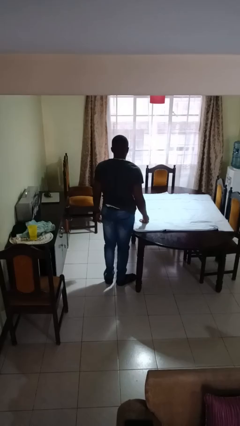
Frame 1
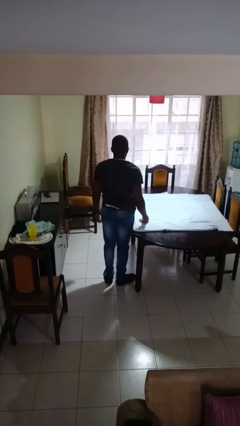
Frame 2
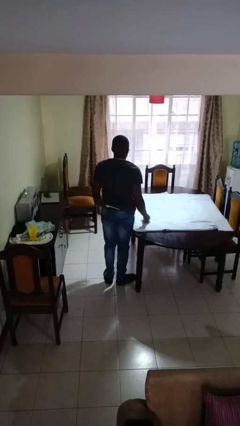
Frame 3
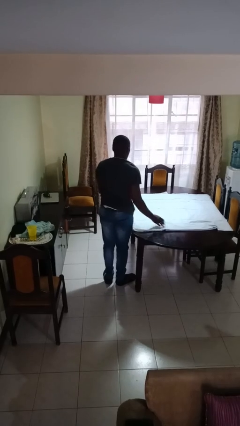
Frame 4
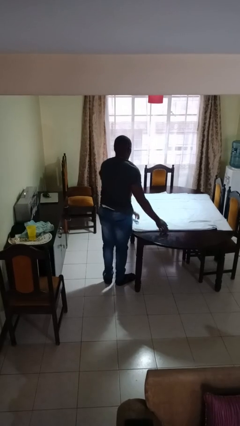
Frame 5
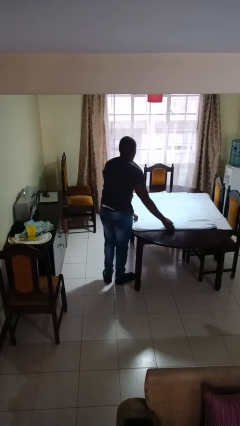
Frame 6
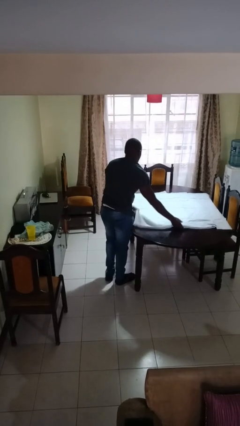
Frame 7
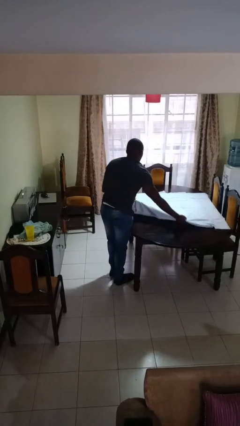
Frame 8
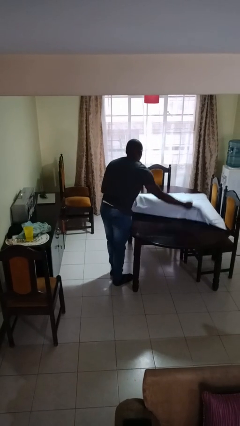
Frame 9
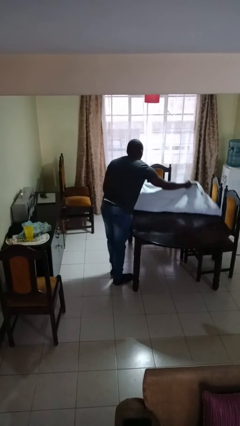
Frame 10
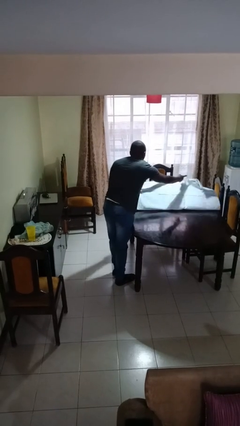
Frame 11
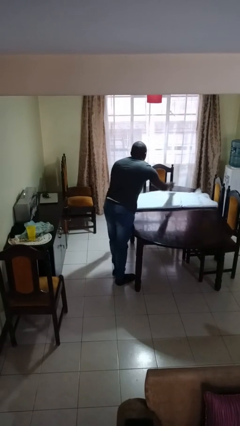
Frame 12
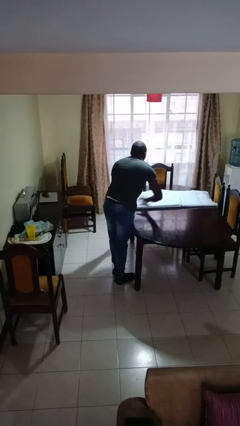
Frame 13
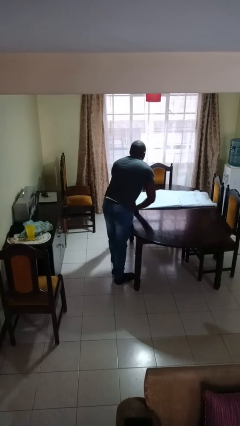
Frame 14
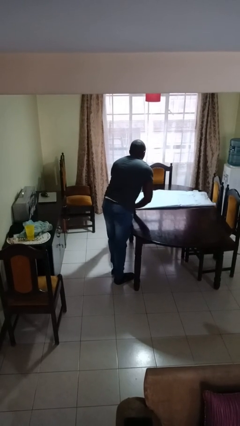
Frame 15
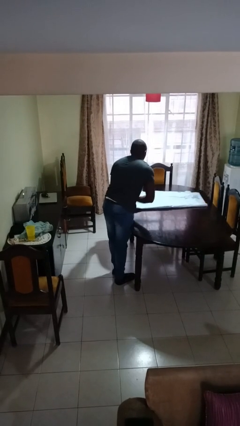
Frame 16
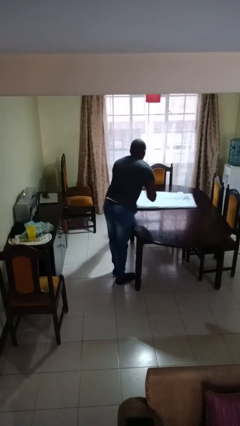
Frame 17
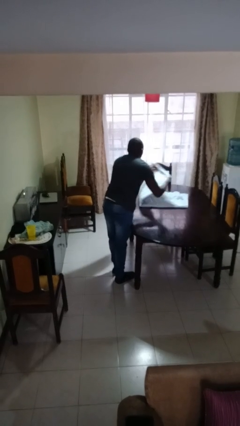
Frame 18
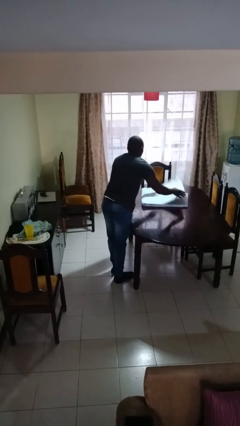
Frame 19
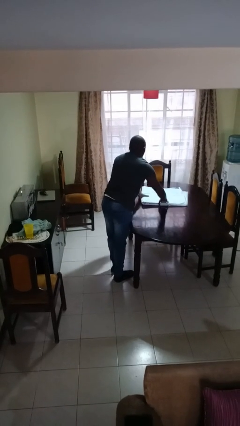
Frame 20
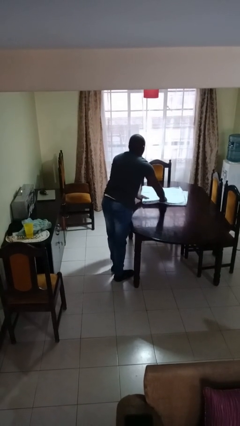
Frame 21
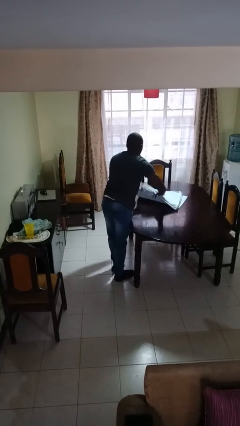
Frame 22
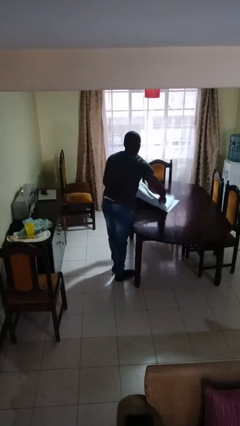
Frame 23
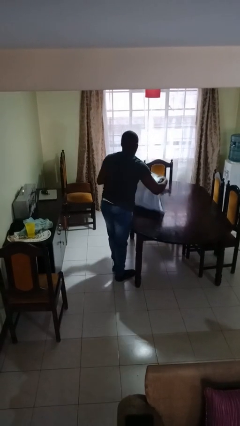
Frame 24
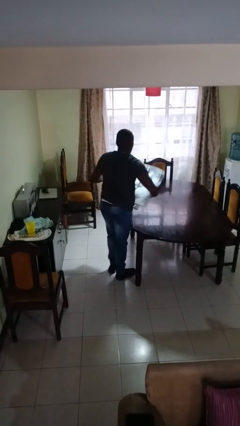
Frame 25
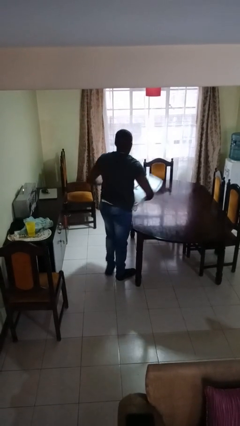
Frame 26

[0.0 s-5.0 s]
person folds tablecloth

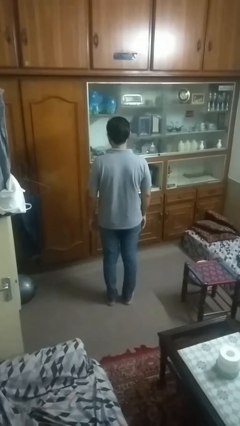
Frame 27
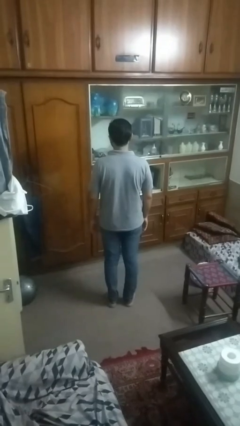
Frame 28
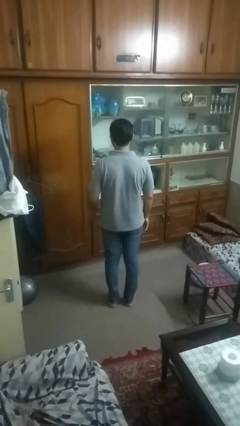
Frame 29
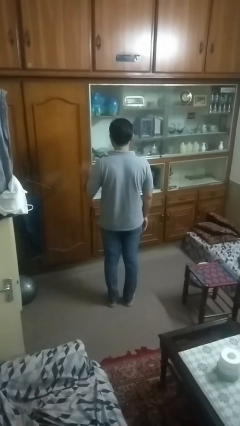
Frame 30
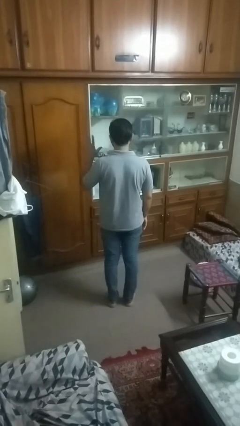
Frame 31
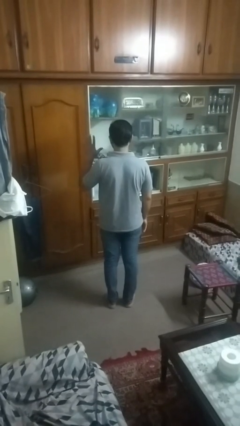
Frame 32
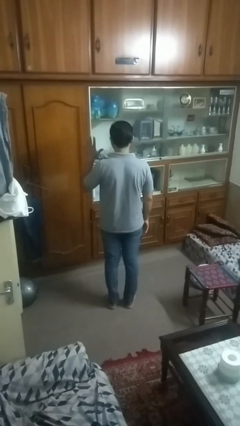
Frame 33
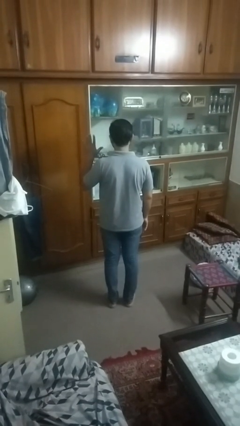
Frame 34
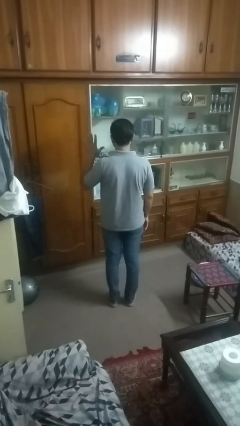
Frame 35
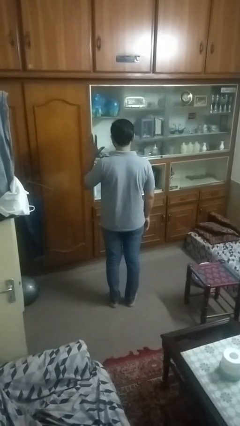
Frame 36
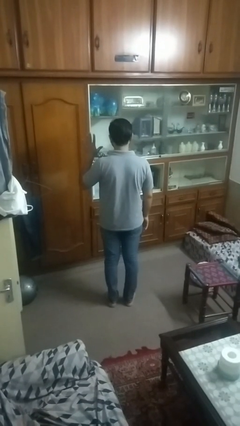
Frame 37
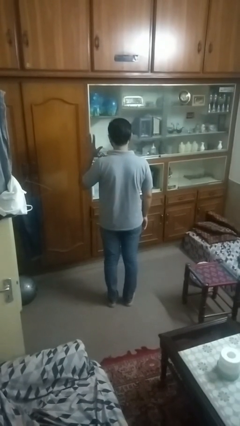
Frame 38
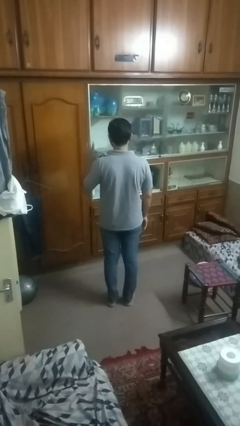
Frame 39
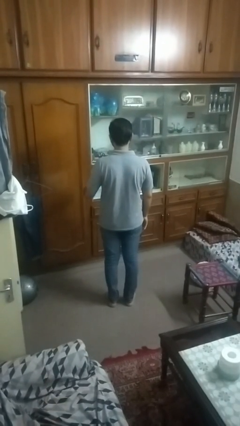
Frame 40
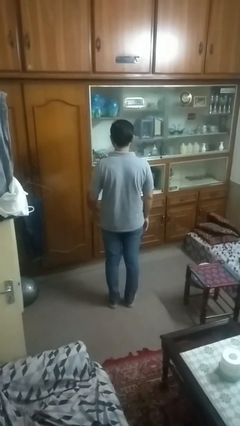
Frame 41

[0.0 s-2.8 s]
person gestures number five

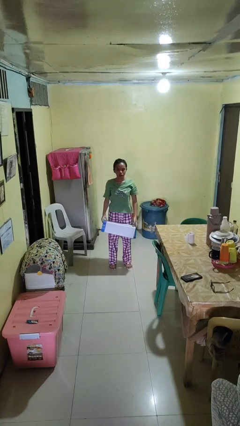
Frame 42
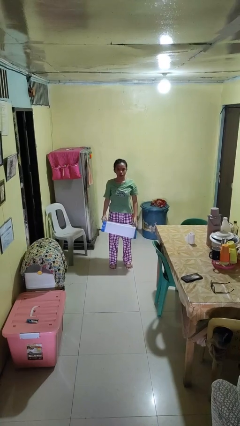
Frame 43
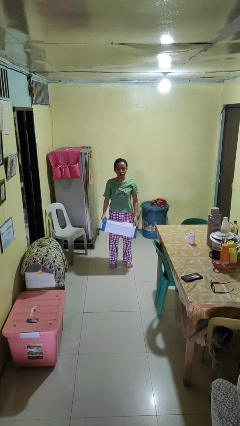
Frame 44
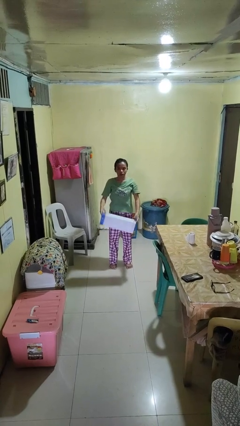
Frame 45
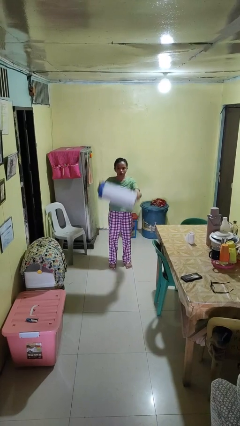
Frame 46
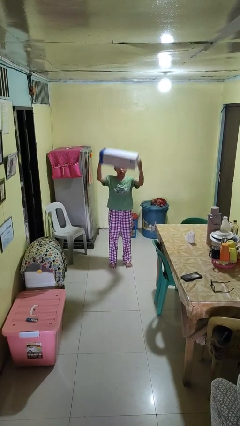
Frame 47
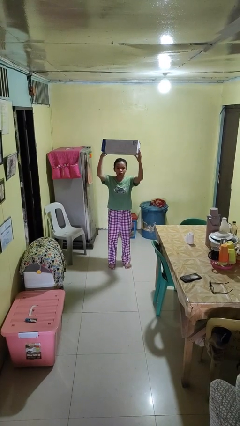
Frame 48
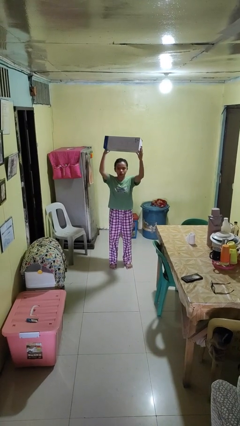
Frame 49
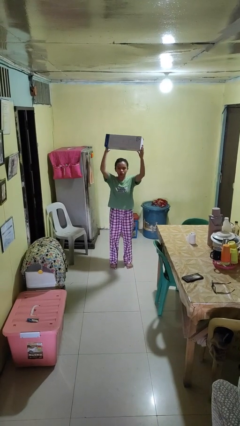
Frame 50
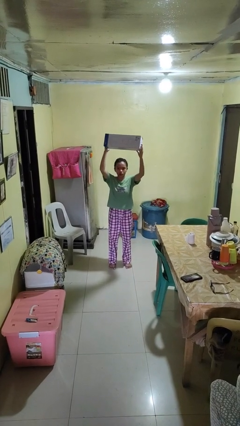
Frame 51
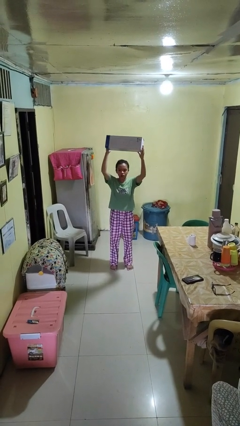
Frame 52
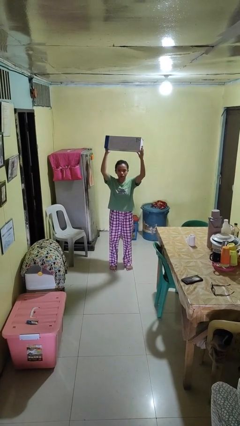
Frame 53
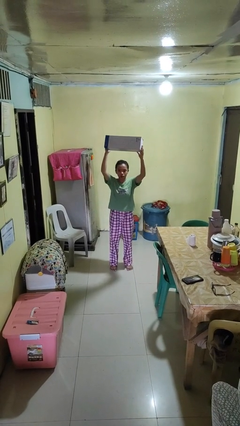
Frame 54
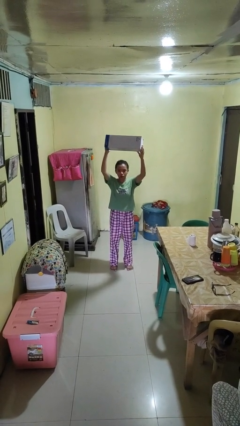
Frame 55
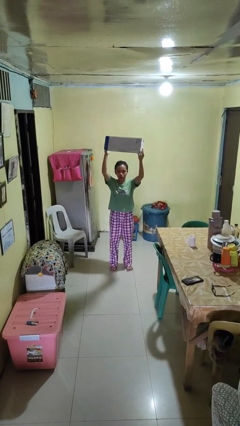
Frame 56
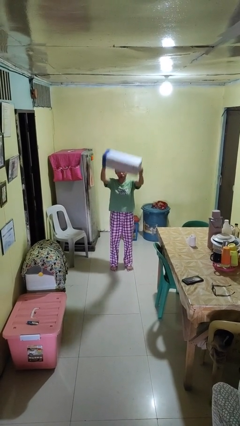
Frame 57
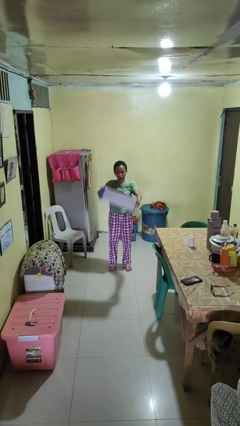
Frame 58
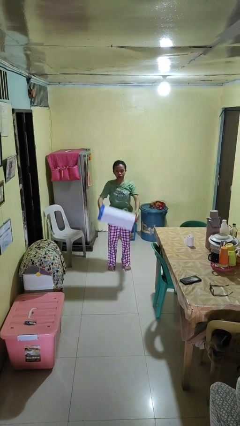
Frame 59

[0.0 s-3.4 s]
person holds object above head

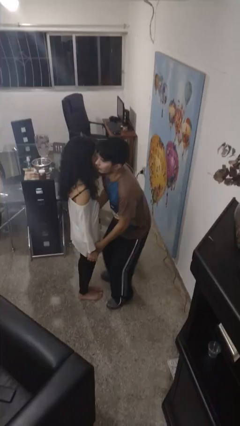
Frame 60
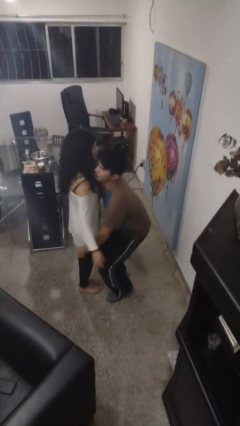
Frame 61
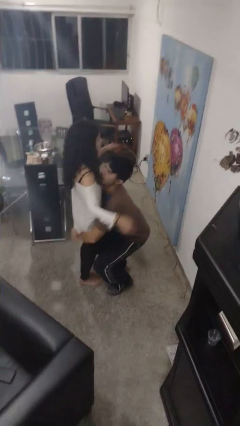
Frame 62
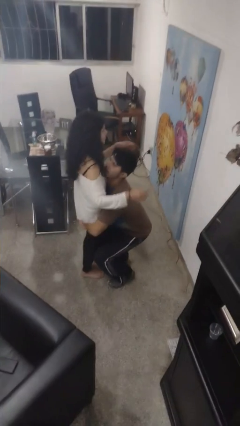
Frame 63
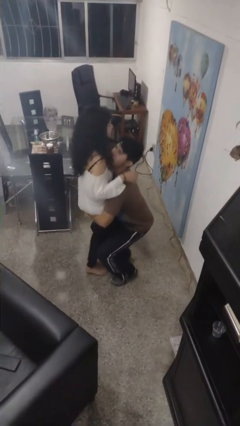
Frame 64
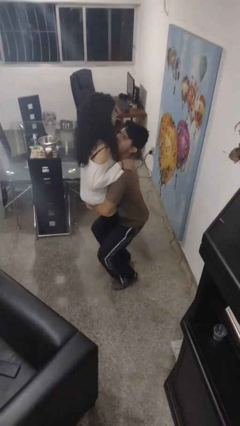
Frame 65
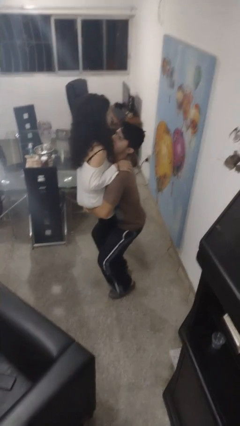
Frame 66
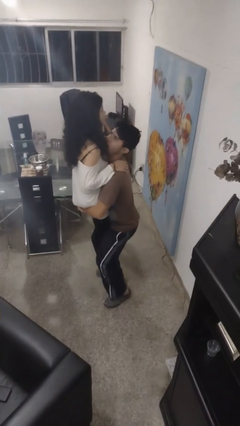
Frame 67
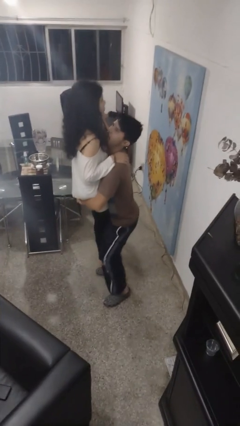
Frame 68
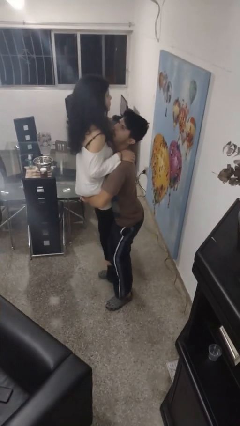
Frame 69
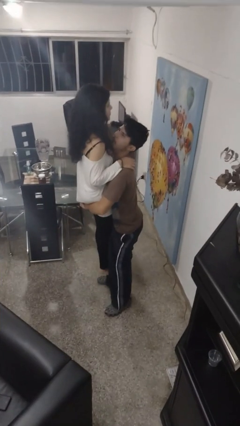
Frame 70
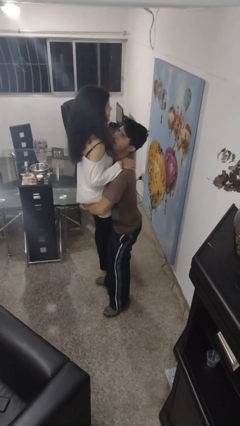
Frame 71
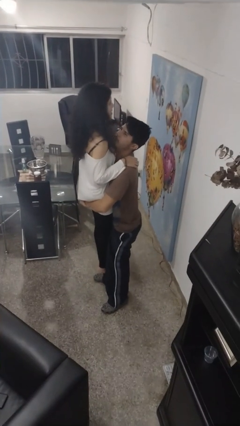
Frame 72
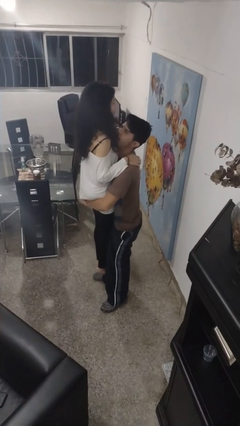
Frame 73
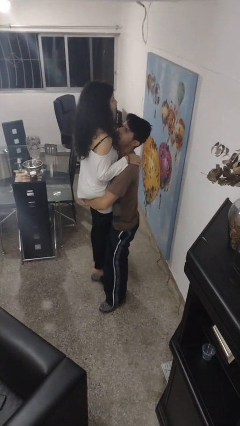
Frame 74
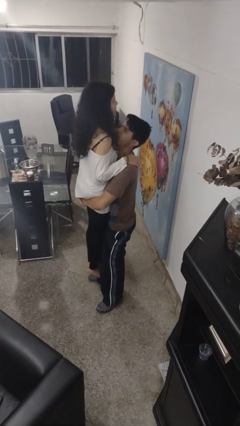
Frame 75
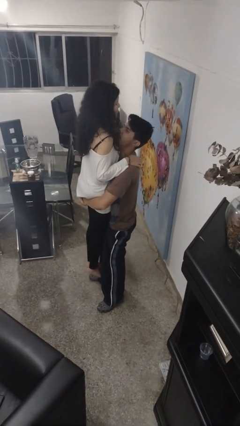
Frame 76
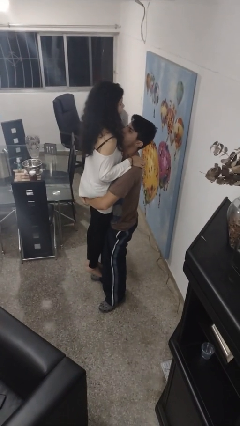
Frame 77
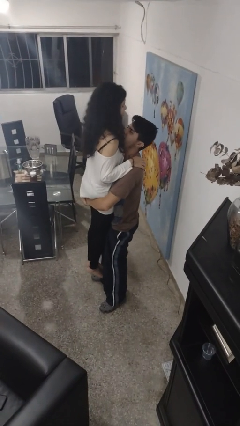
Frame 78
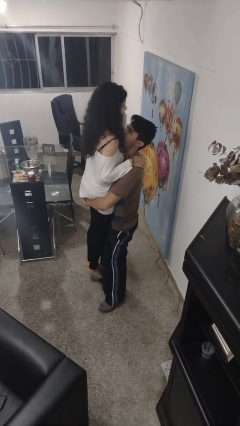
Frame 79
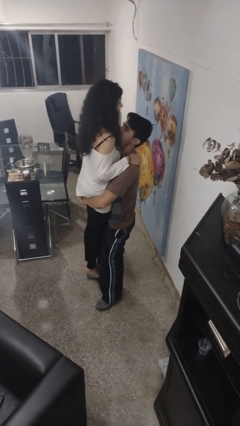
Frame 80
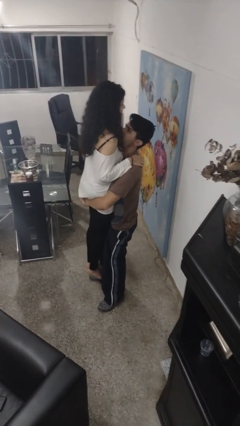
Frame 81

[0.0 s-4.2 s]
person picks up person

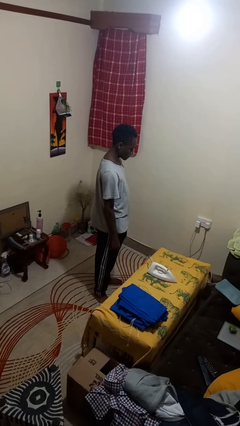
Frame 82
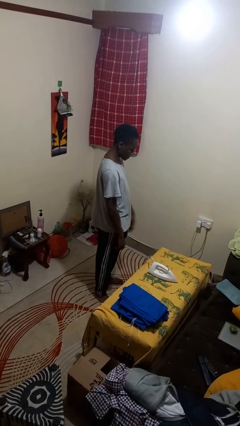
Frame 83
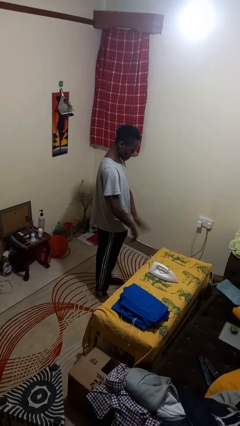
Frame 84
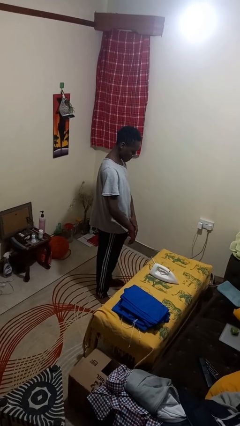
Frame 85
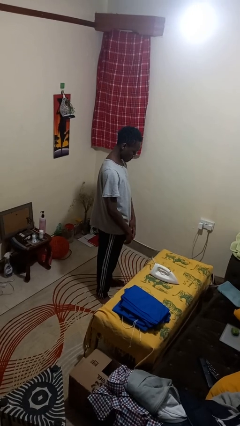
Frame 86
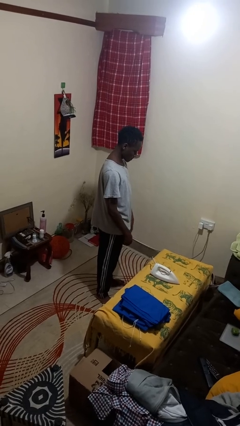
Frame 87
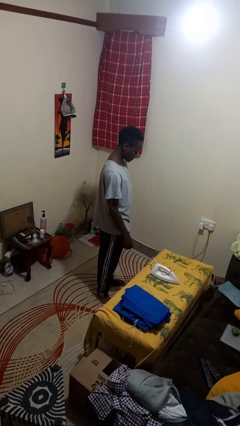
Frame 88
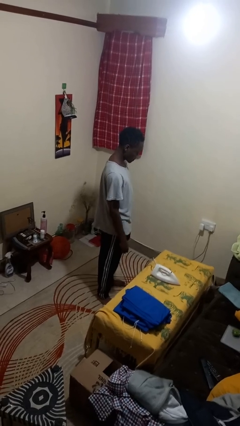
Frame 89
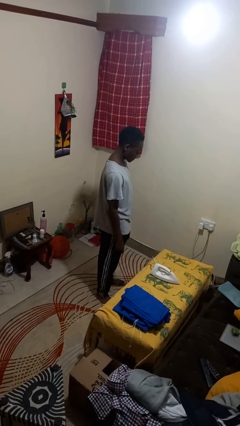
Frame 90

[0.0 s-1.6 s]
person swats bug

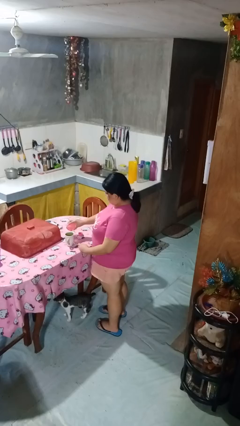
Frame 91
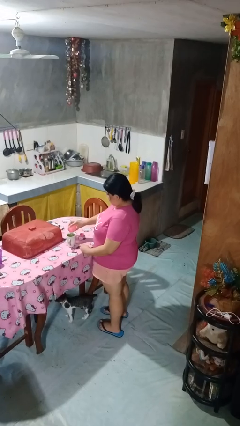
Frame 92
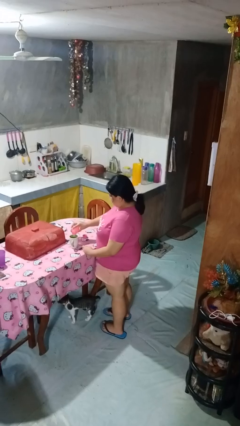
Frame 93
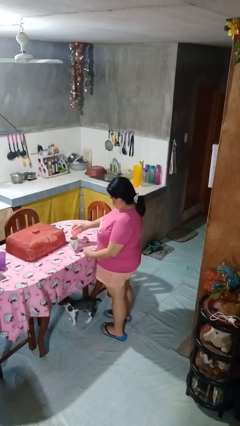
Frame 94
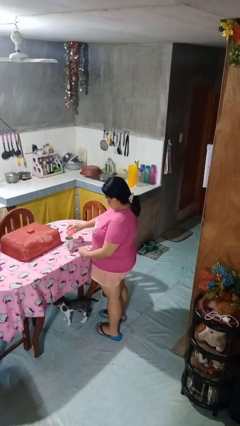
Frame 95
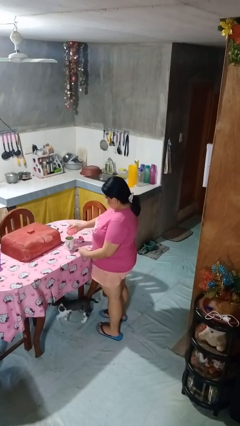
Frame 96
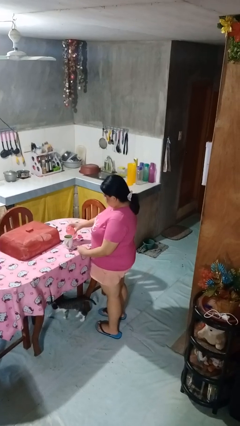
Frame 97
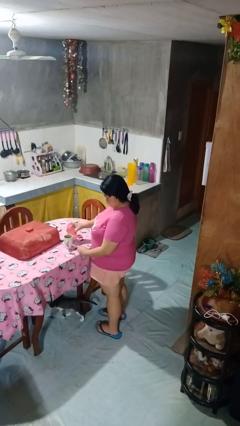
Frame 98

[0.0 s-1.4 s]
person pours liquid into cup
